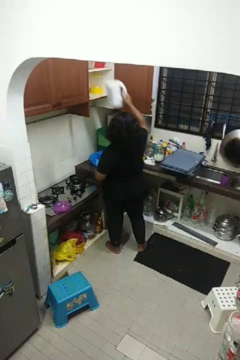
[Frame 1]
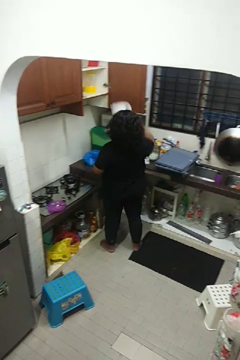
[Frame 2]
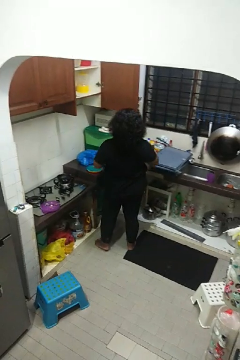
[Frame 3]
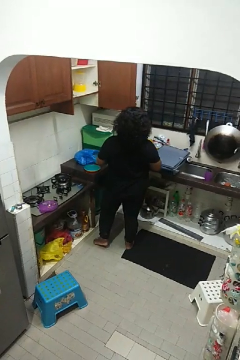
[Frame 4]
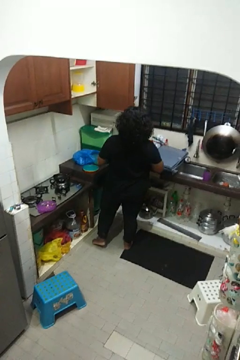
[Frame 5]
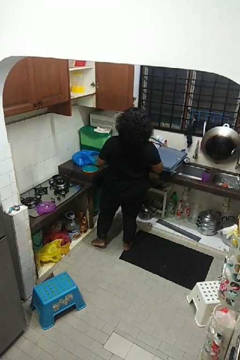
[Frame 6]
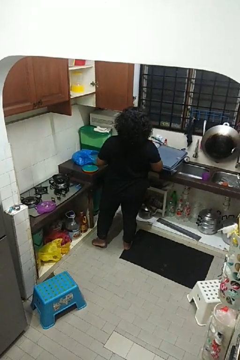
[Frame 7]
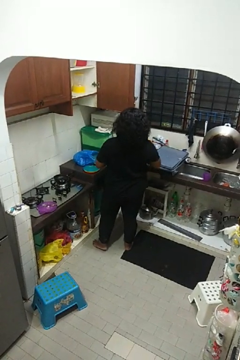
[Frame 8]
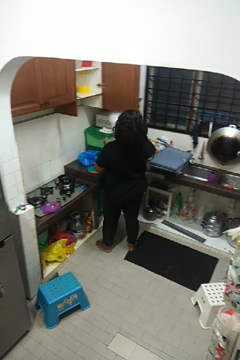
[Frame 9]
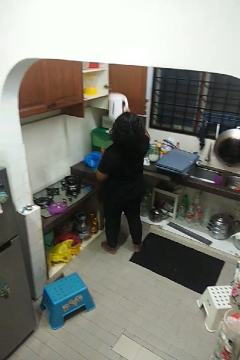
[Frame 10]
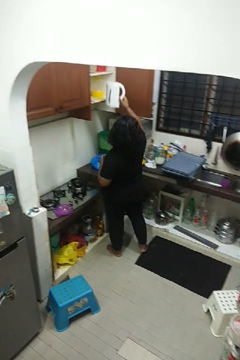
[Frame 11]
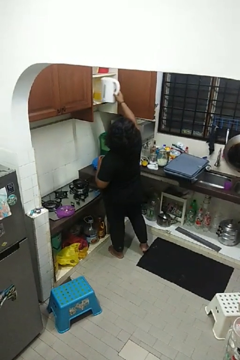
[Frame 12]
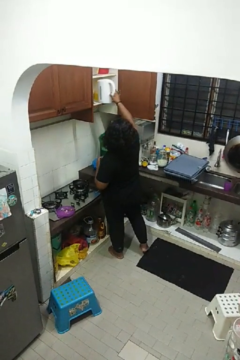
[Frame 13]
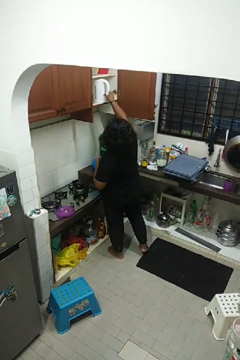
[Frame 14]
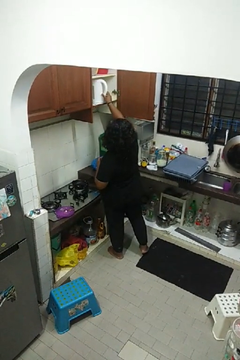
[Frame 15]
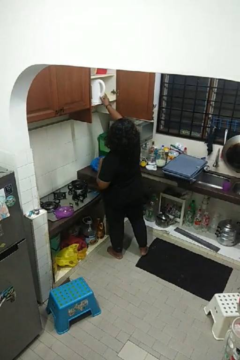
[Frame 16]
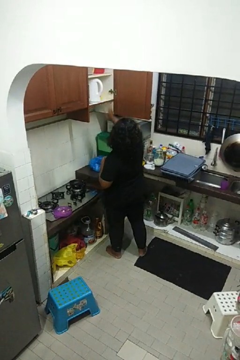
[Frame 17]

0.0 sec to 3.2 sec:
person puts object in cabinet

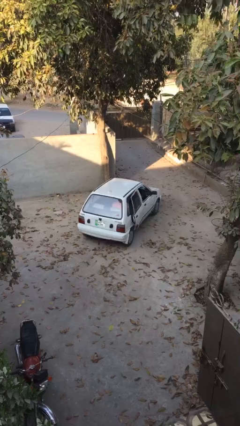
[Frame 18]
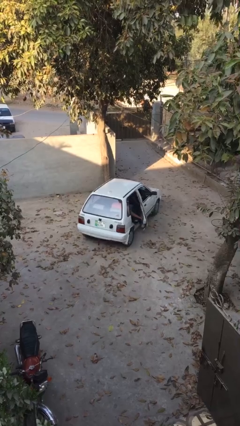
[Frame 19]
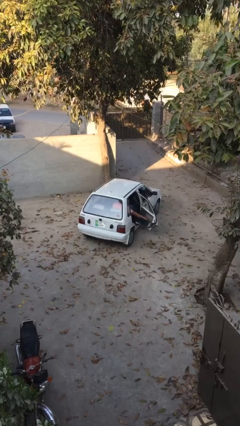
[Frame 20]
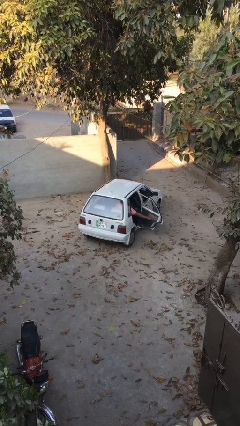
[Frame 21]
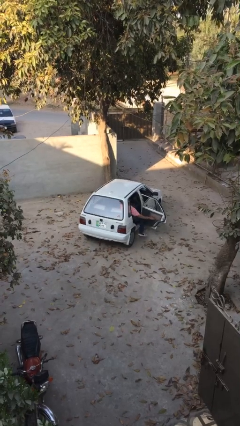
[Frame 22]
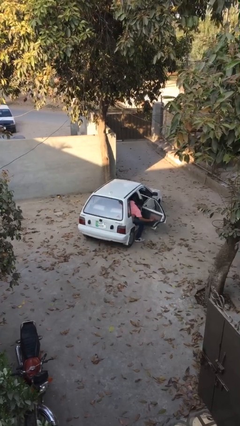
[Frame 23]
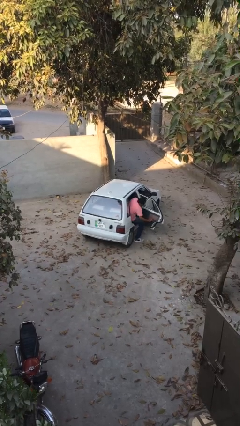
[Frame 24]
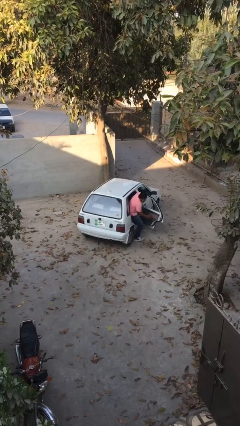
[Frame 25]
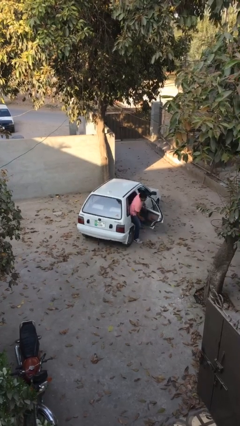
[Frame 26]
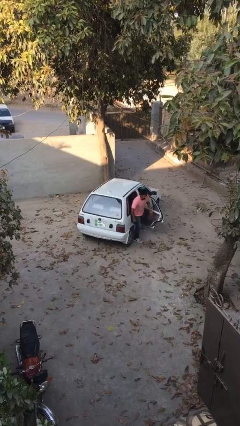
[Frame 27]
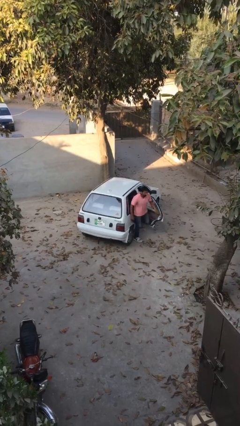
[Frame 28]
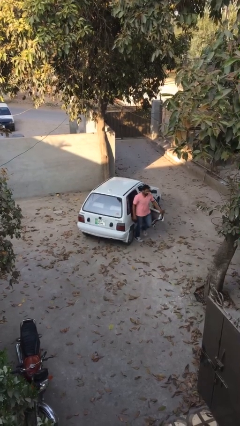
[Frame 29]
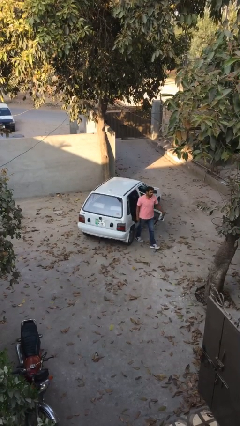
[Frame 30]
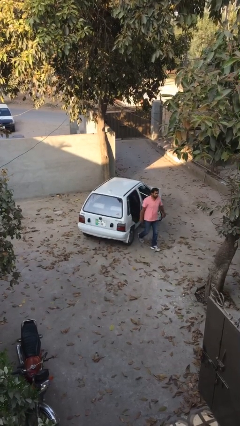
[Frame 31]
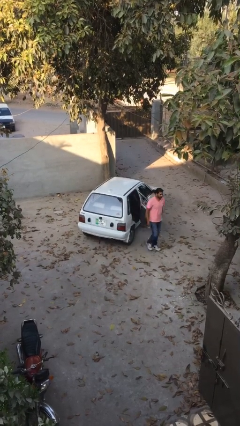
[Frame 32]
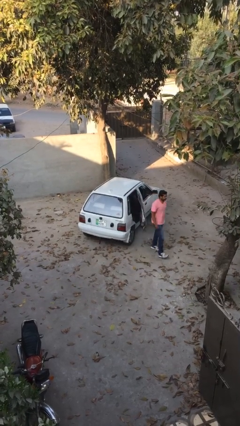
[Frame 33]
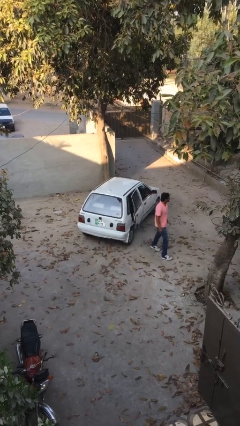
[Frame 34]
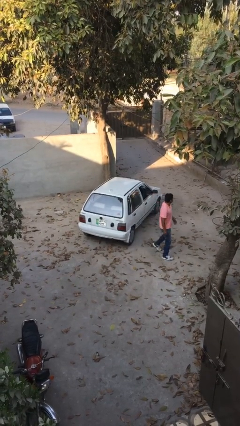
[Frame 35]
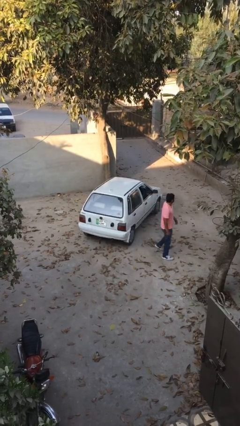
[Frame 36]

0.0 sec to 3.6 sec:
car drops off person

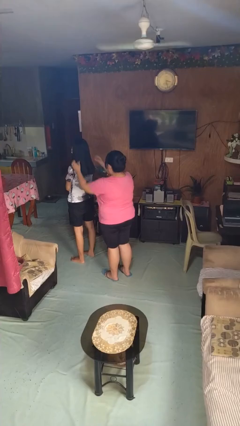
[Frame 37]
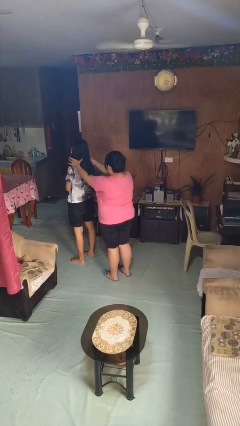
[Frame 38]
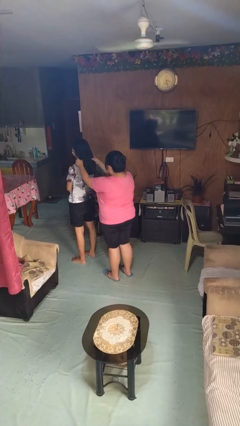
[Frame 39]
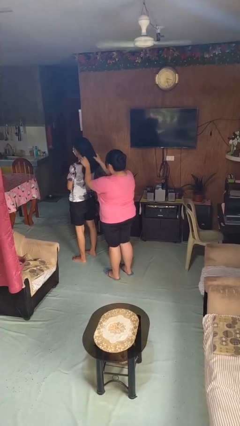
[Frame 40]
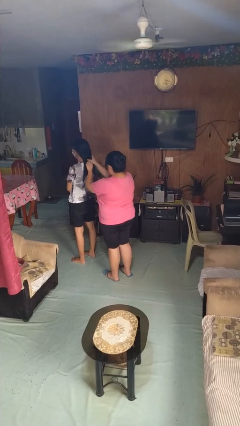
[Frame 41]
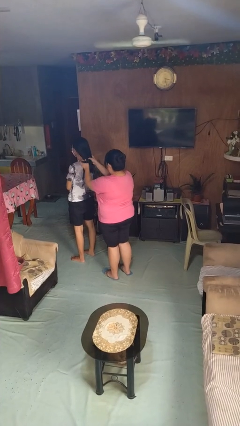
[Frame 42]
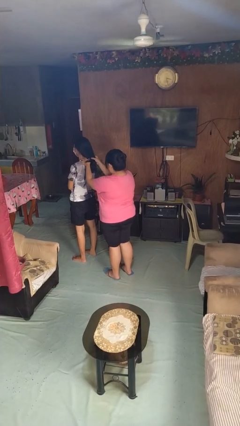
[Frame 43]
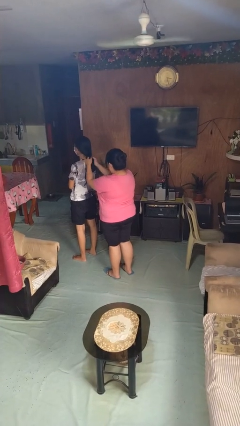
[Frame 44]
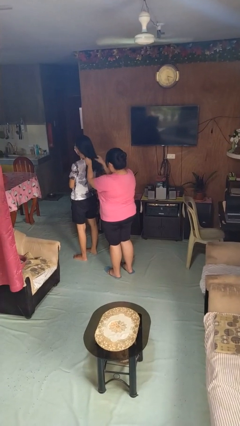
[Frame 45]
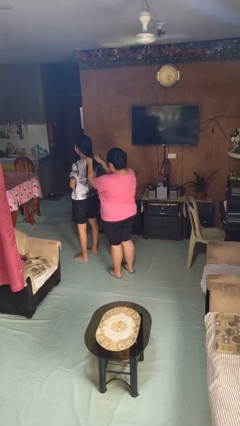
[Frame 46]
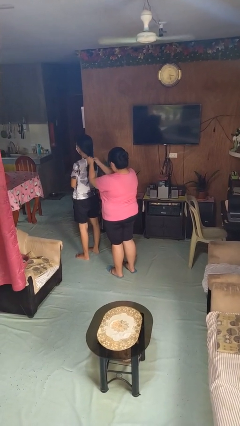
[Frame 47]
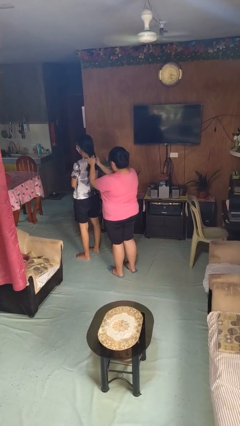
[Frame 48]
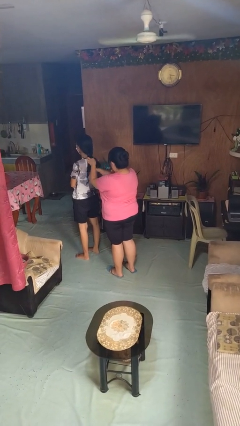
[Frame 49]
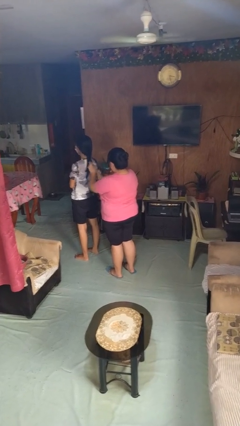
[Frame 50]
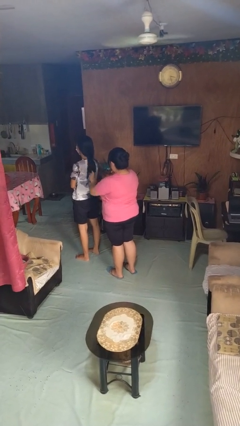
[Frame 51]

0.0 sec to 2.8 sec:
person braids hair of person

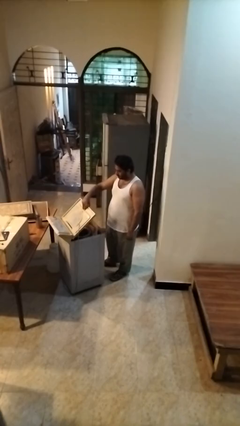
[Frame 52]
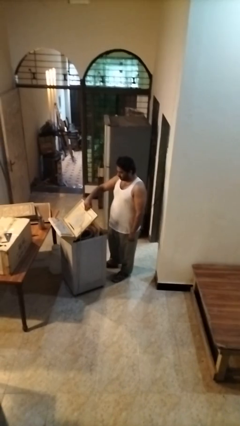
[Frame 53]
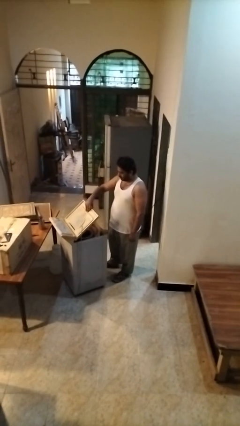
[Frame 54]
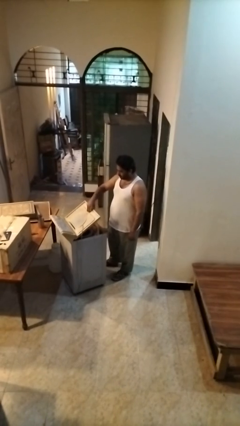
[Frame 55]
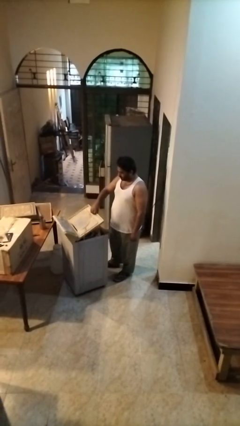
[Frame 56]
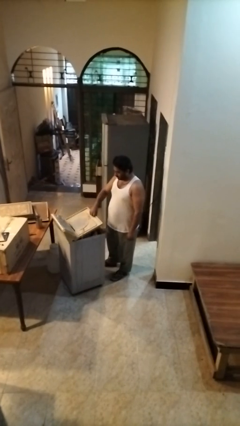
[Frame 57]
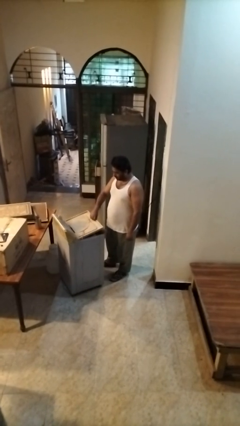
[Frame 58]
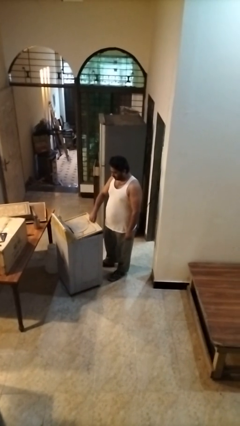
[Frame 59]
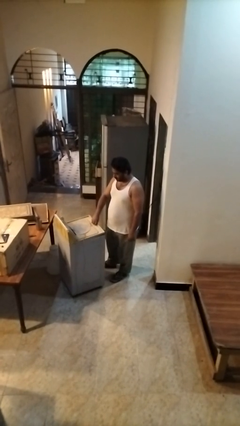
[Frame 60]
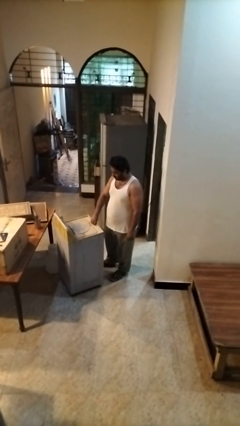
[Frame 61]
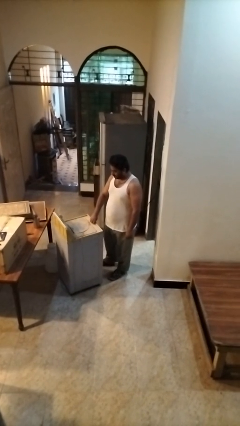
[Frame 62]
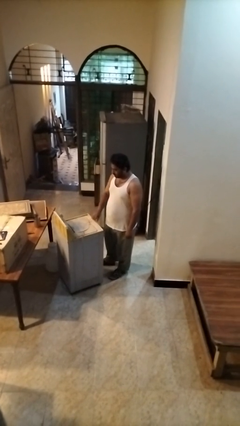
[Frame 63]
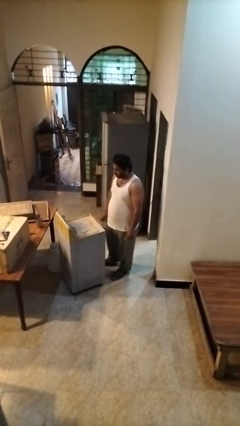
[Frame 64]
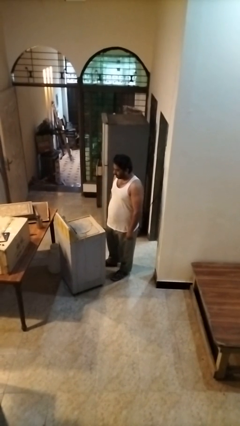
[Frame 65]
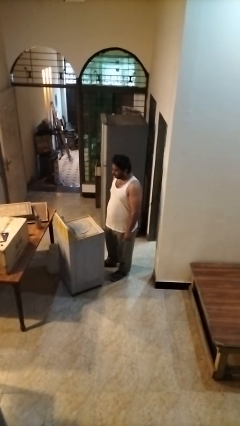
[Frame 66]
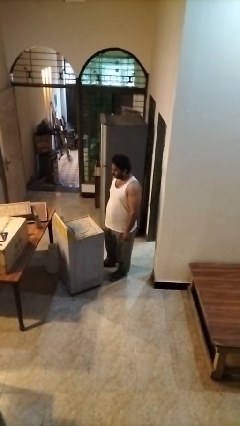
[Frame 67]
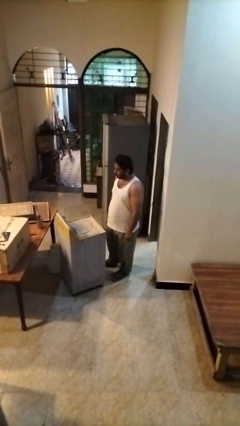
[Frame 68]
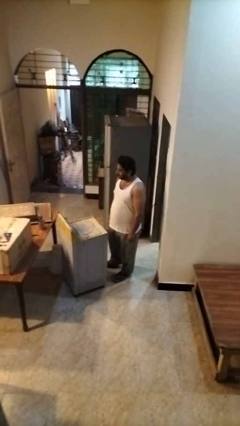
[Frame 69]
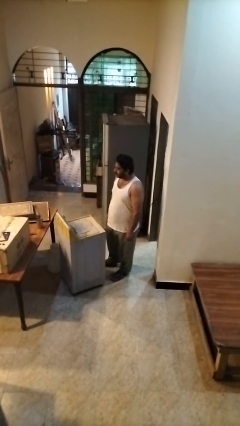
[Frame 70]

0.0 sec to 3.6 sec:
person closes clothes washer

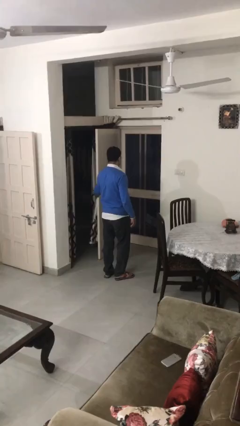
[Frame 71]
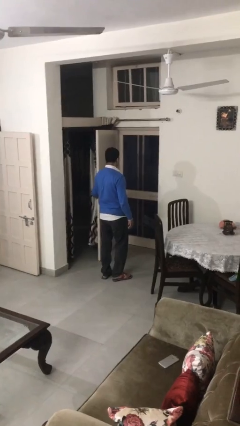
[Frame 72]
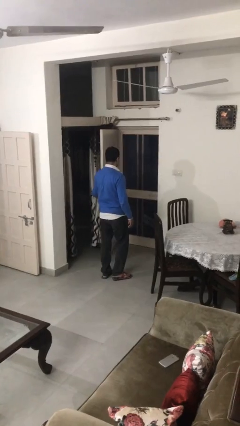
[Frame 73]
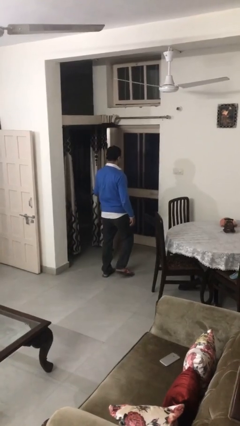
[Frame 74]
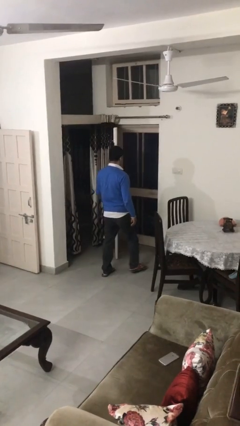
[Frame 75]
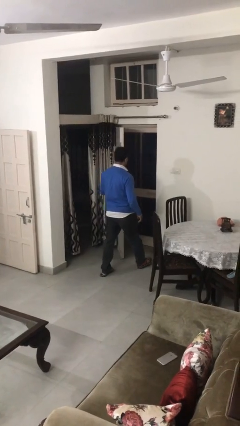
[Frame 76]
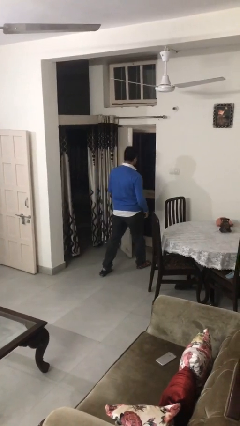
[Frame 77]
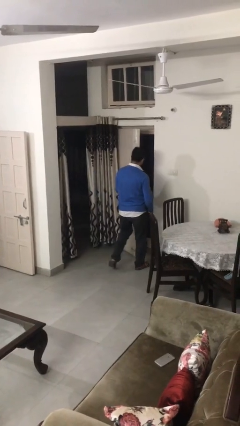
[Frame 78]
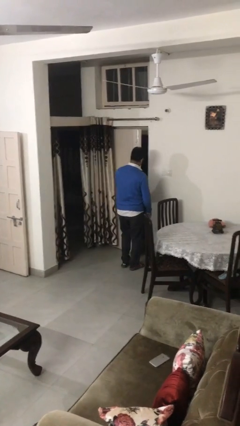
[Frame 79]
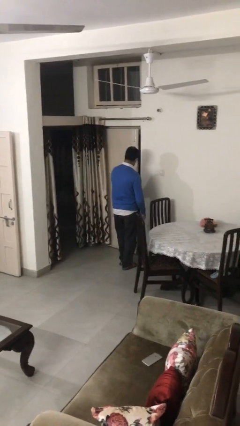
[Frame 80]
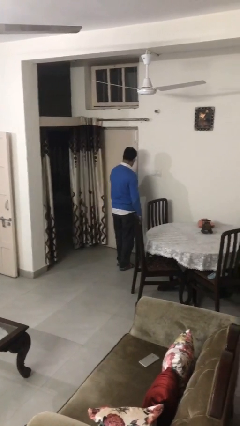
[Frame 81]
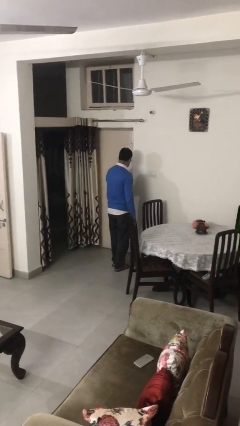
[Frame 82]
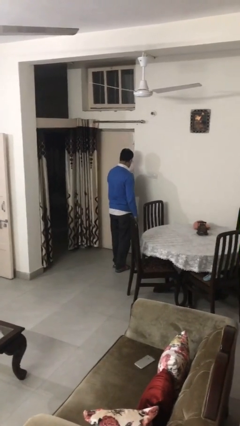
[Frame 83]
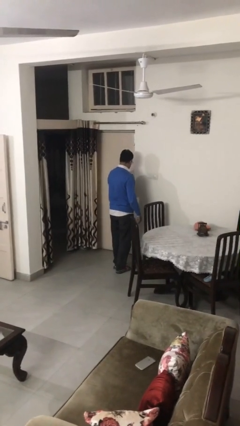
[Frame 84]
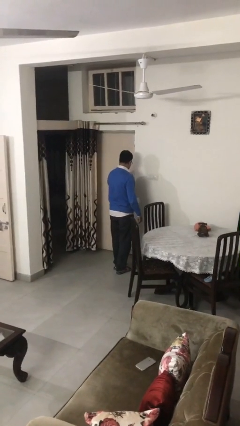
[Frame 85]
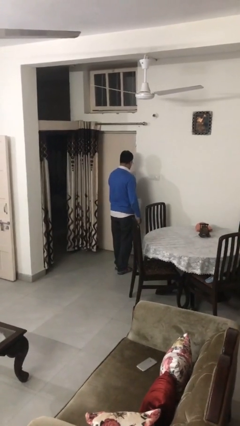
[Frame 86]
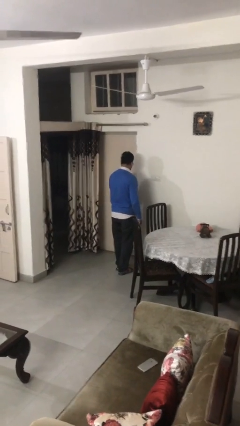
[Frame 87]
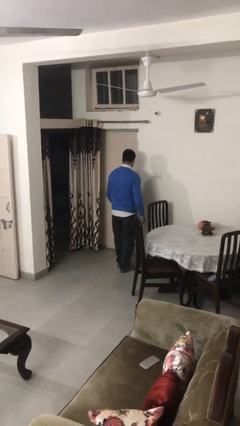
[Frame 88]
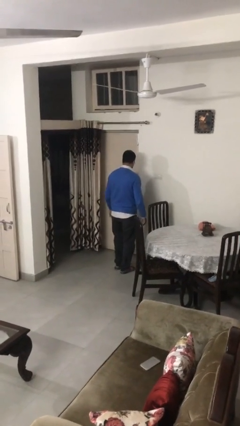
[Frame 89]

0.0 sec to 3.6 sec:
person closes facility door

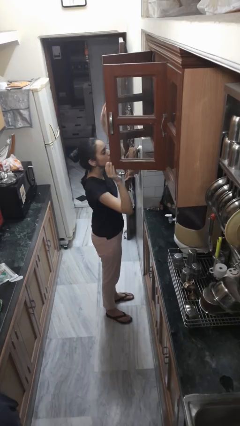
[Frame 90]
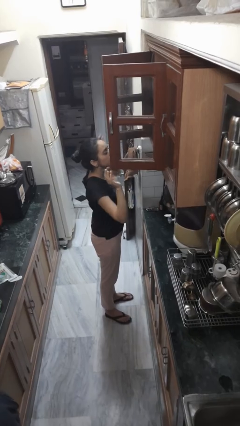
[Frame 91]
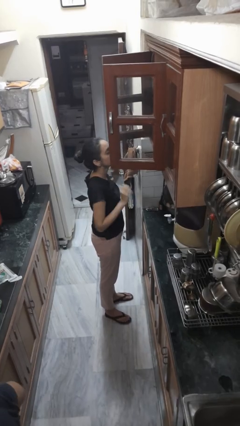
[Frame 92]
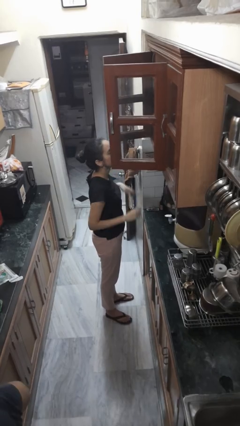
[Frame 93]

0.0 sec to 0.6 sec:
person opens cabinet

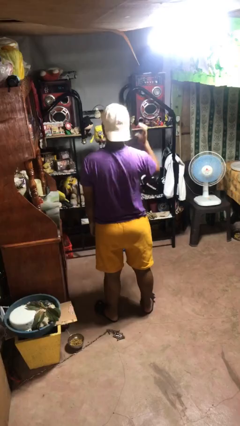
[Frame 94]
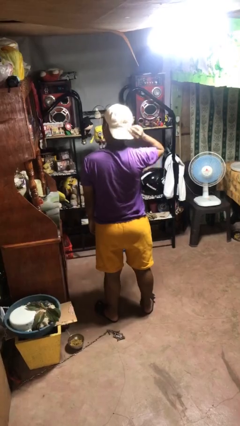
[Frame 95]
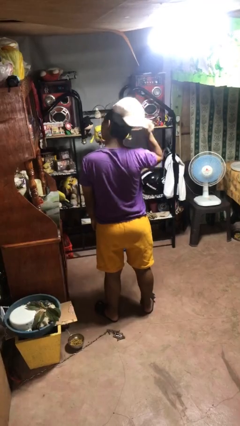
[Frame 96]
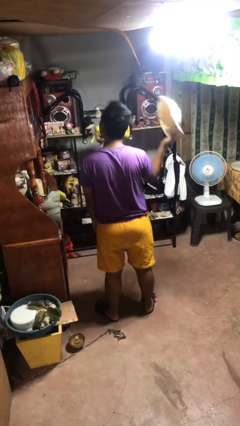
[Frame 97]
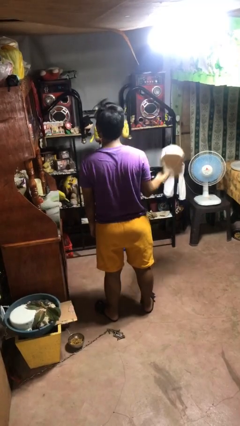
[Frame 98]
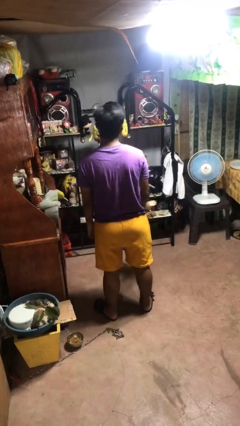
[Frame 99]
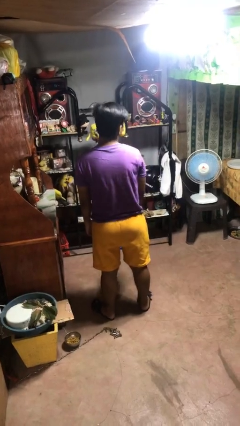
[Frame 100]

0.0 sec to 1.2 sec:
person takes off hat
